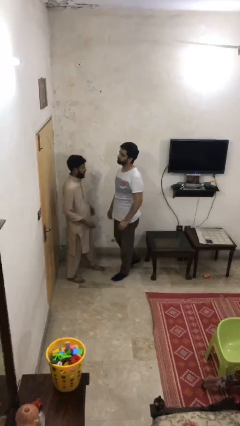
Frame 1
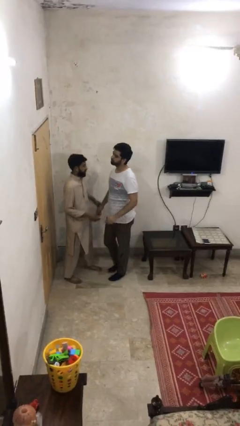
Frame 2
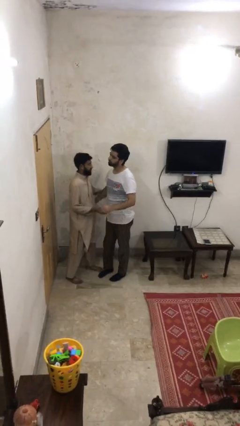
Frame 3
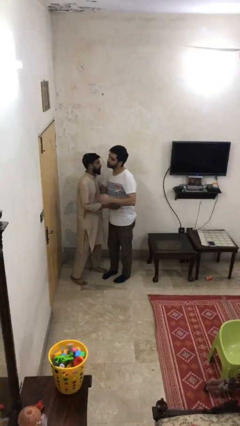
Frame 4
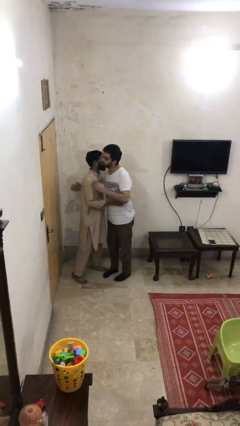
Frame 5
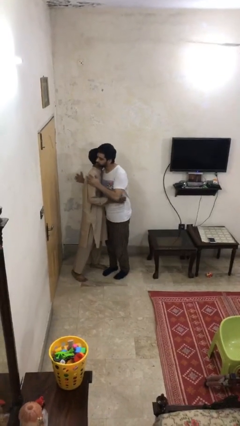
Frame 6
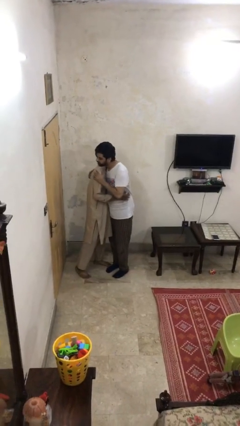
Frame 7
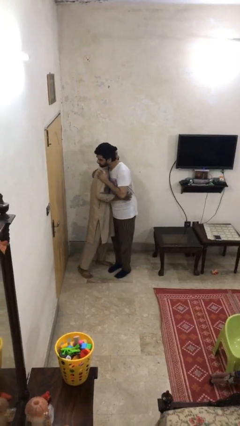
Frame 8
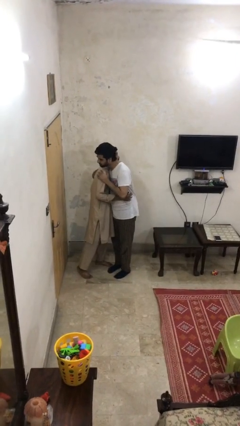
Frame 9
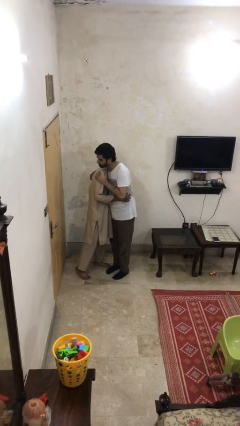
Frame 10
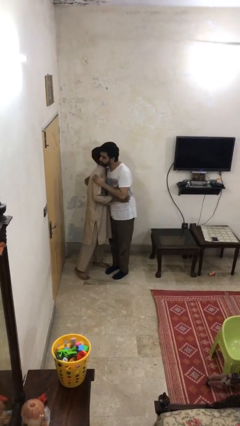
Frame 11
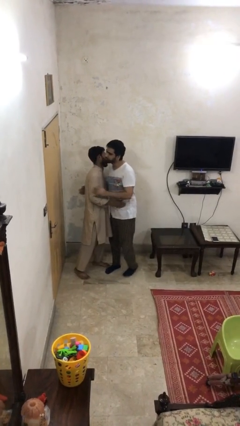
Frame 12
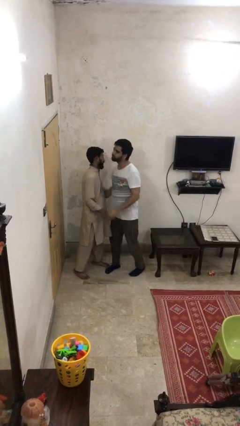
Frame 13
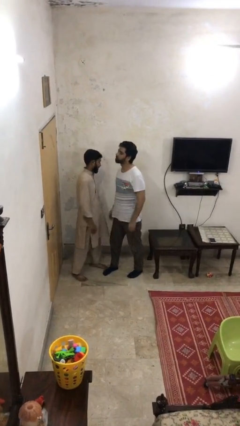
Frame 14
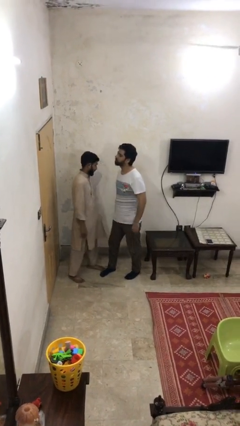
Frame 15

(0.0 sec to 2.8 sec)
person embraces person

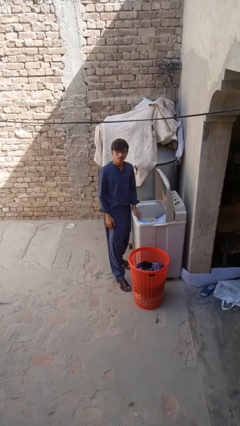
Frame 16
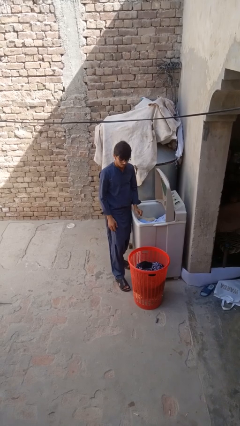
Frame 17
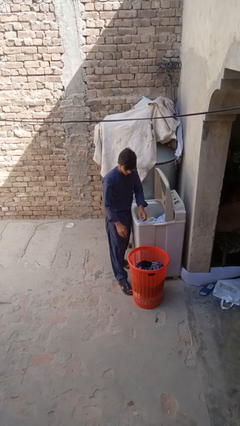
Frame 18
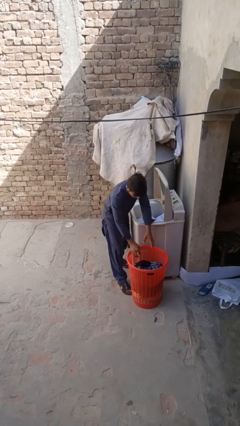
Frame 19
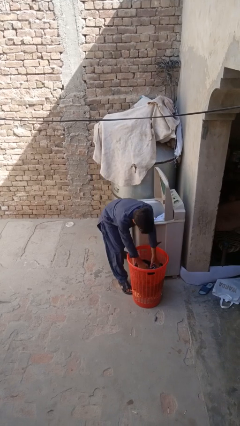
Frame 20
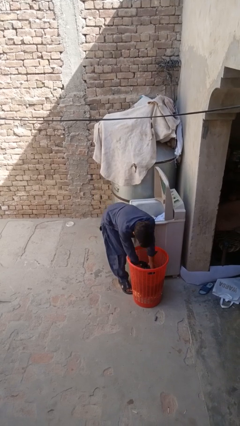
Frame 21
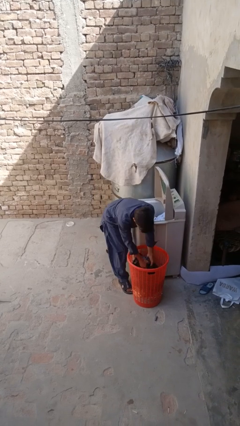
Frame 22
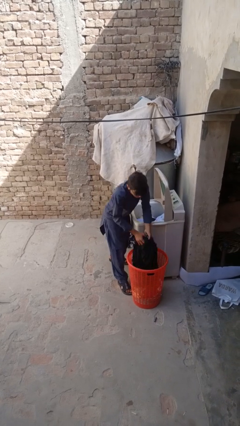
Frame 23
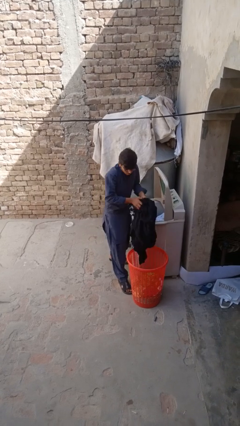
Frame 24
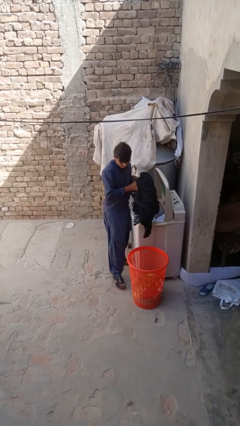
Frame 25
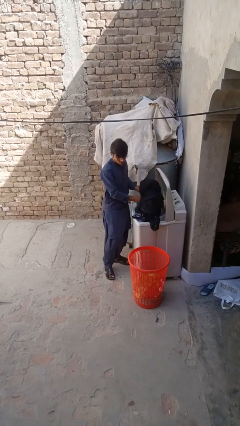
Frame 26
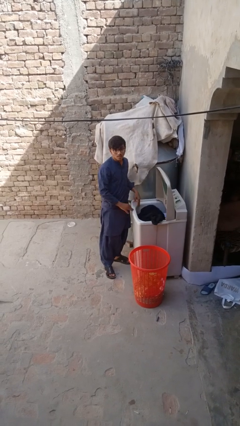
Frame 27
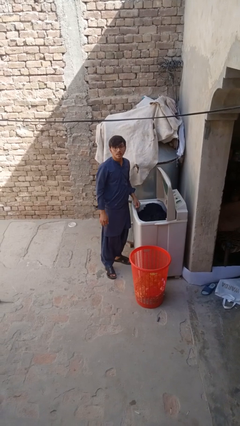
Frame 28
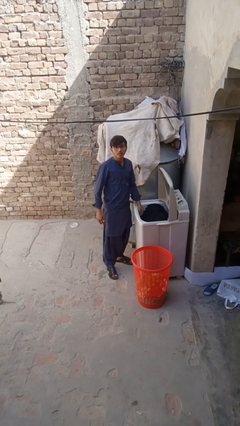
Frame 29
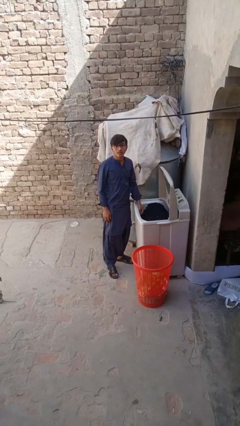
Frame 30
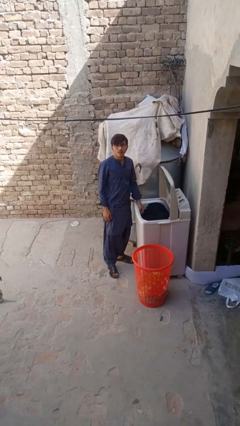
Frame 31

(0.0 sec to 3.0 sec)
person loads clotheswasher

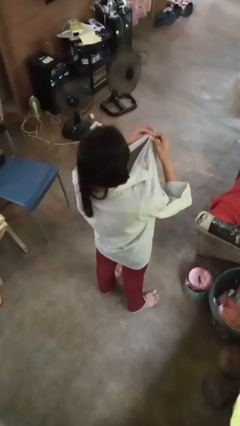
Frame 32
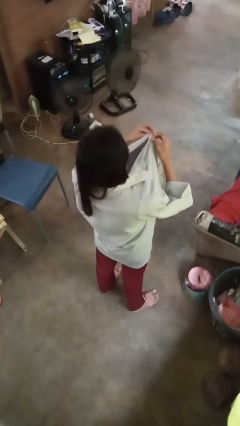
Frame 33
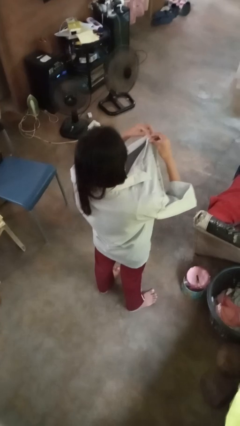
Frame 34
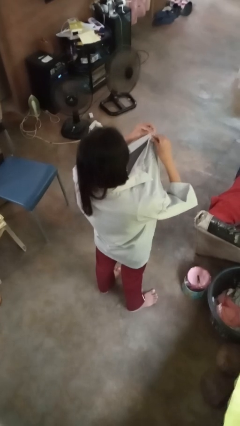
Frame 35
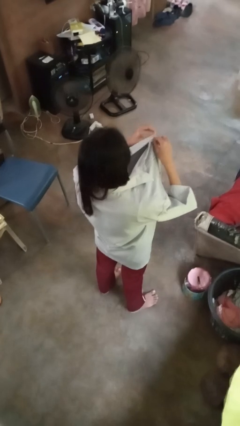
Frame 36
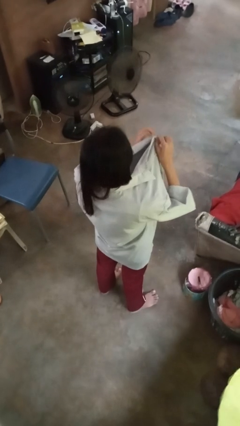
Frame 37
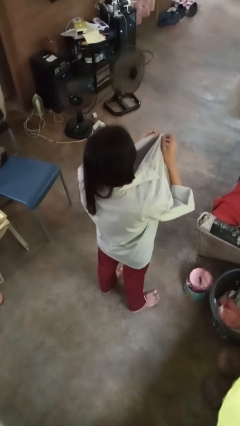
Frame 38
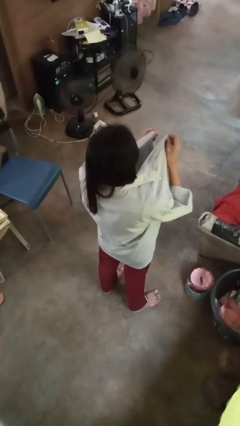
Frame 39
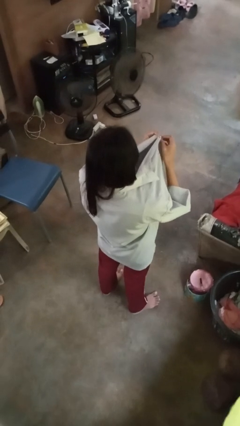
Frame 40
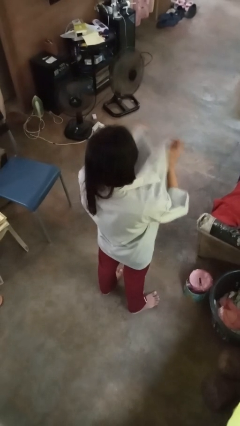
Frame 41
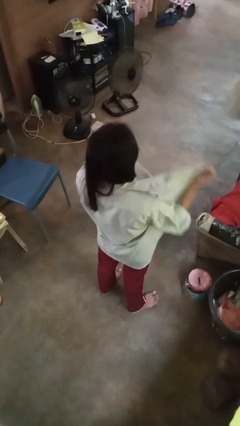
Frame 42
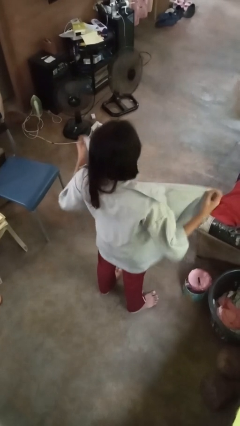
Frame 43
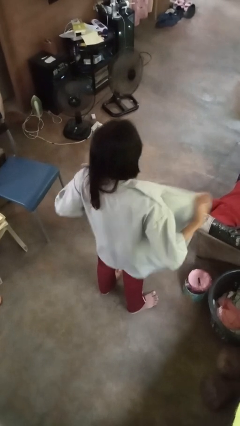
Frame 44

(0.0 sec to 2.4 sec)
person unbuttons shirt

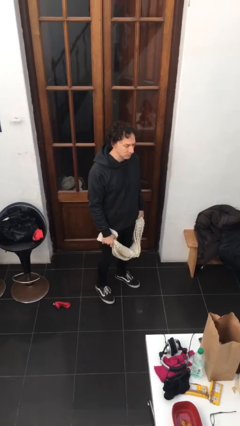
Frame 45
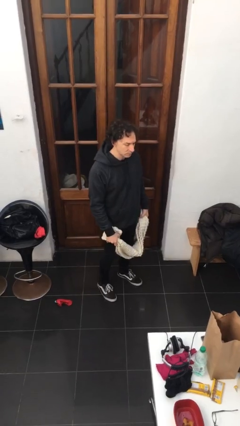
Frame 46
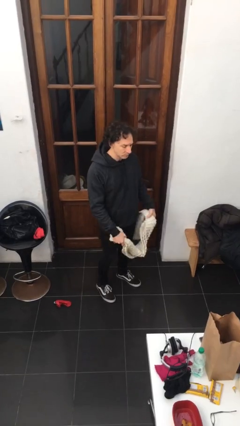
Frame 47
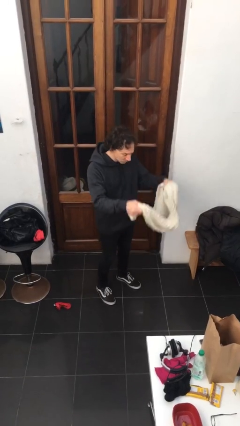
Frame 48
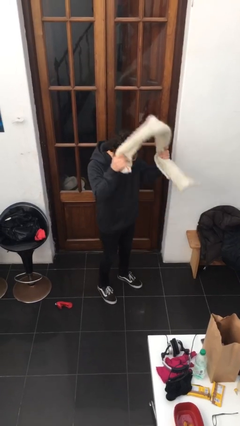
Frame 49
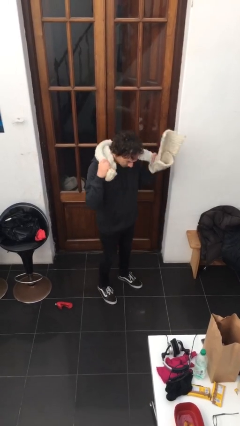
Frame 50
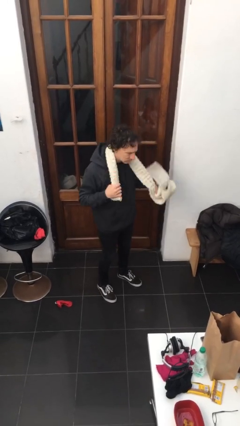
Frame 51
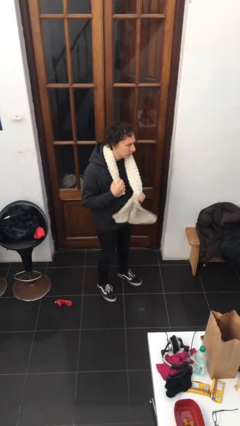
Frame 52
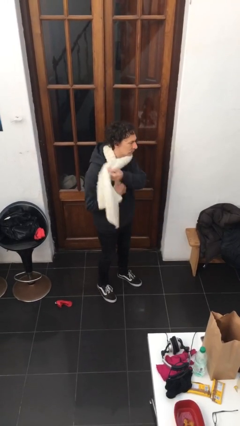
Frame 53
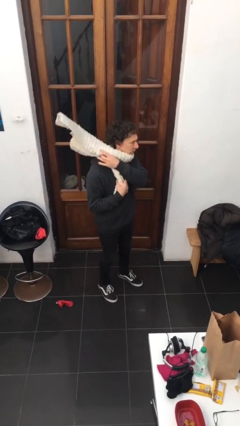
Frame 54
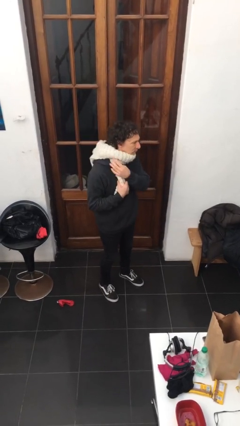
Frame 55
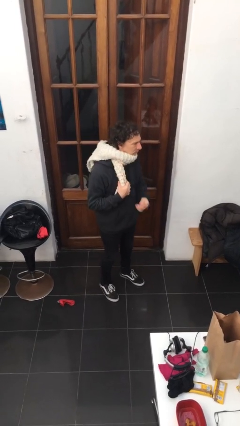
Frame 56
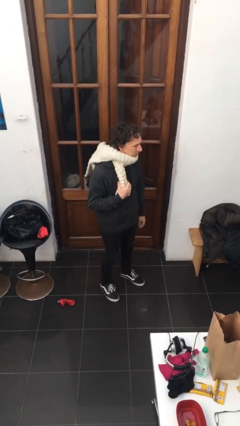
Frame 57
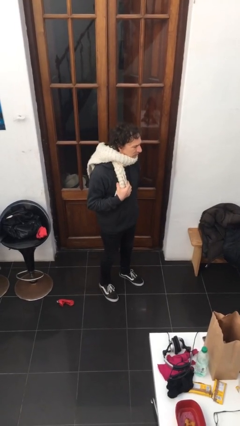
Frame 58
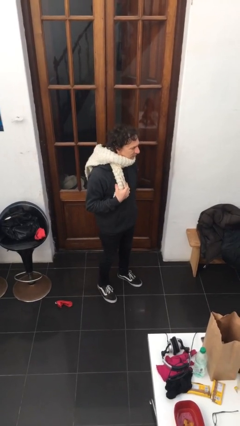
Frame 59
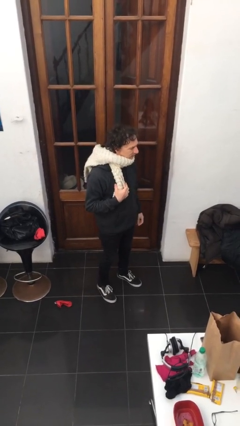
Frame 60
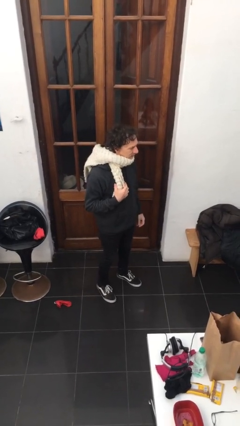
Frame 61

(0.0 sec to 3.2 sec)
person puts on scarf

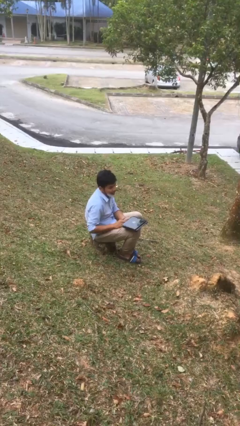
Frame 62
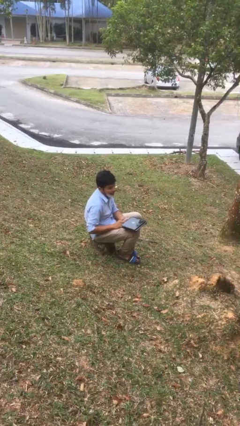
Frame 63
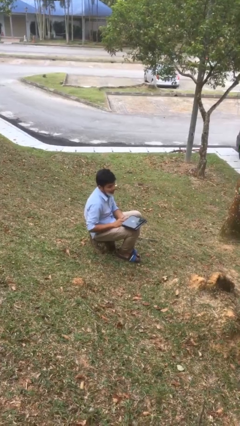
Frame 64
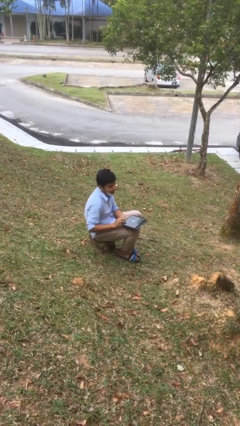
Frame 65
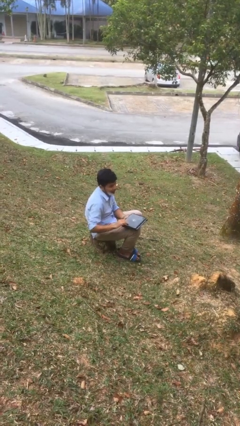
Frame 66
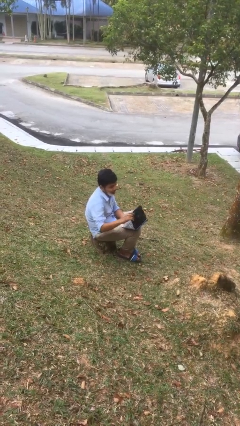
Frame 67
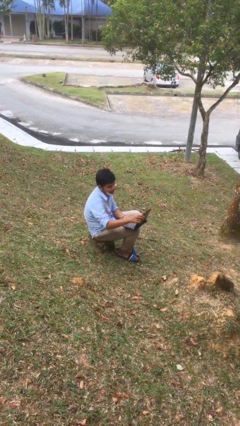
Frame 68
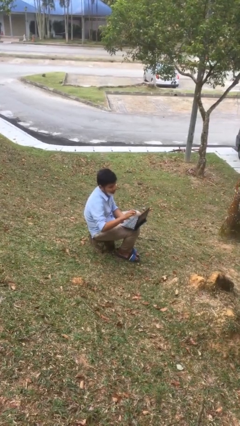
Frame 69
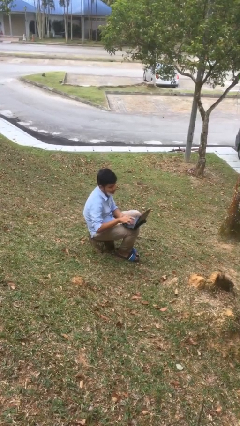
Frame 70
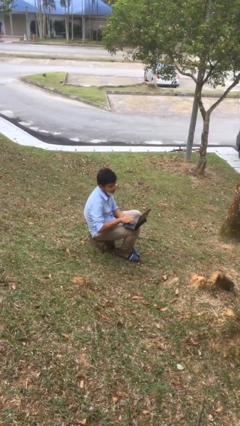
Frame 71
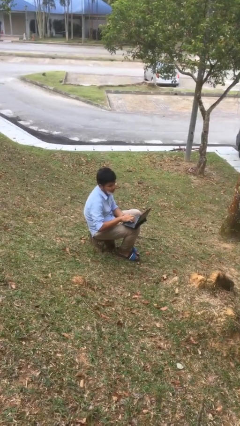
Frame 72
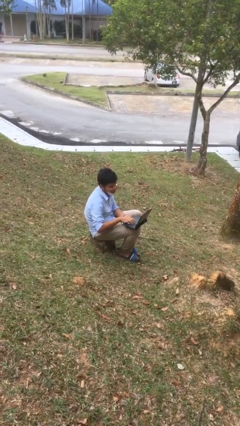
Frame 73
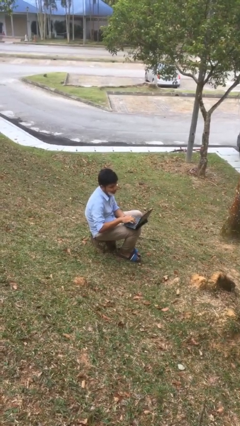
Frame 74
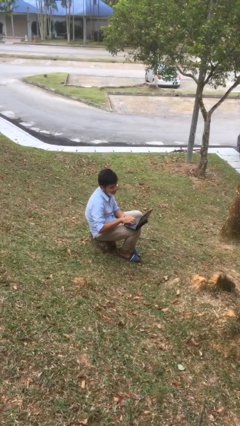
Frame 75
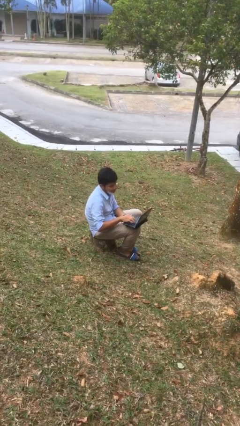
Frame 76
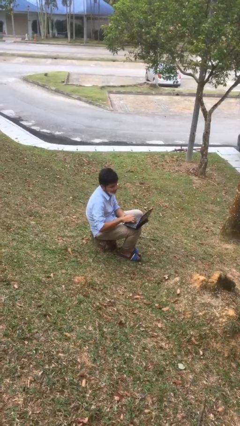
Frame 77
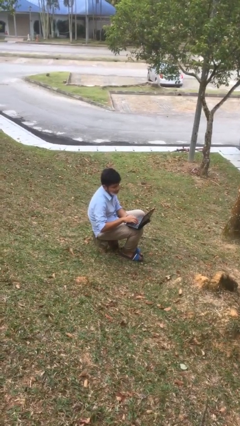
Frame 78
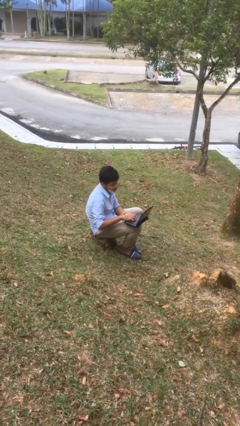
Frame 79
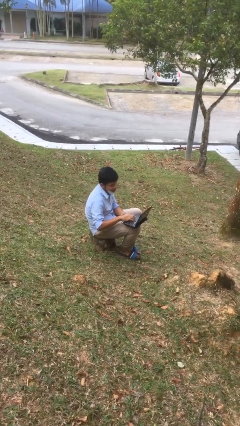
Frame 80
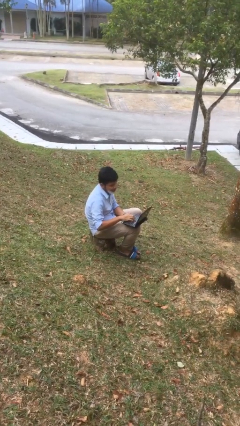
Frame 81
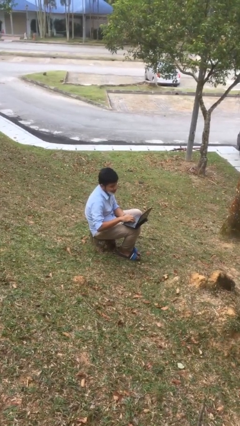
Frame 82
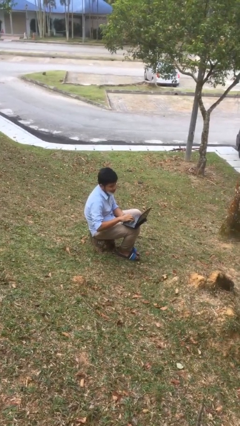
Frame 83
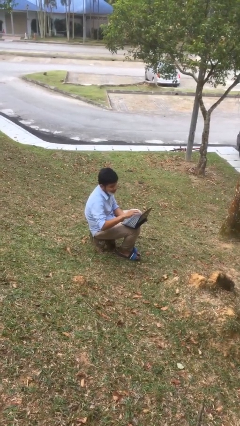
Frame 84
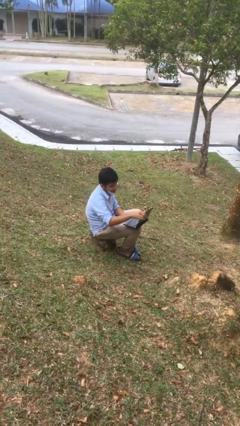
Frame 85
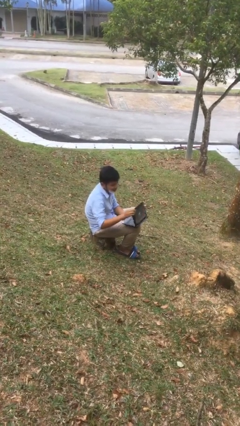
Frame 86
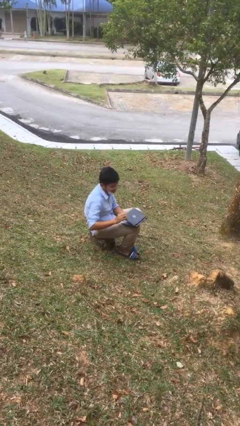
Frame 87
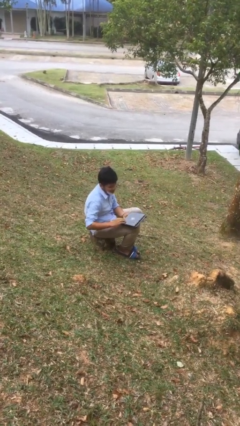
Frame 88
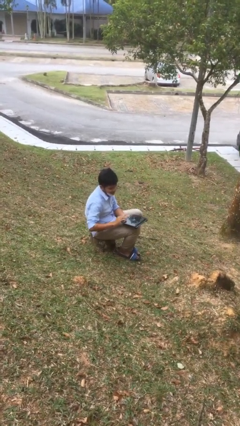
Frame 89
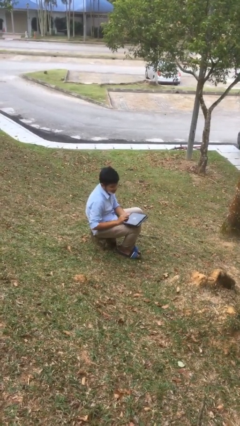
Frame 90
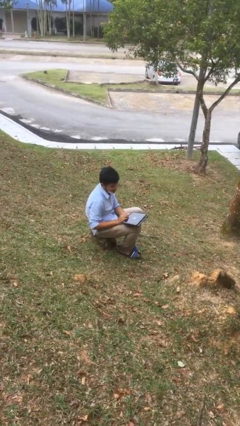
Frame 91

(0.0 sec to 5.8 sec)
person interacts with laptop

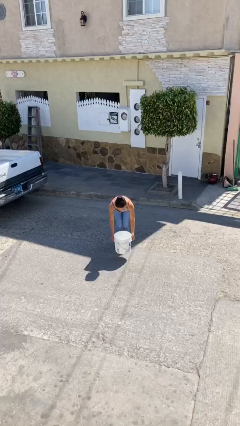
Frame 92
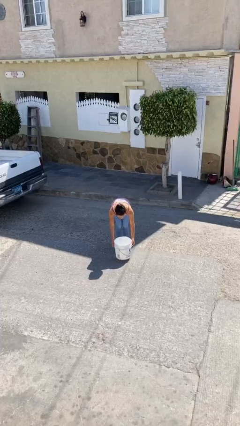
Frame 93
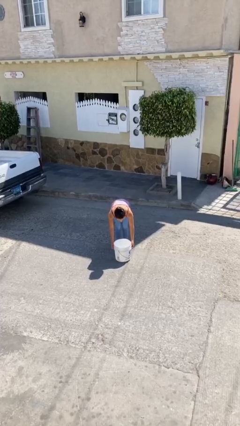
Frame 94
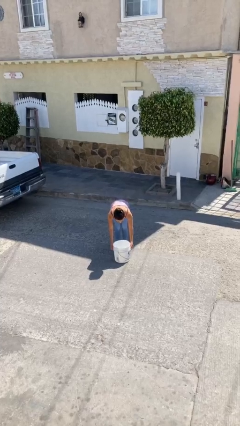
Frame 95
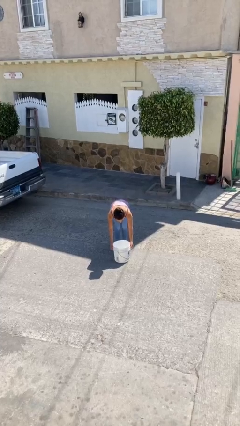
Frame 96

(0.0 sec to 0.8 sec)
person puts down object on floor
